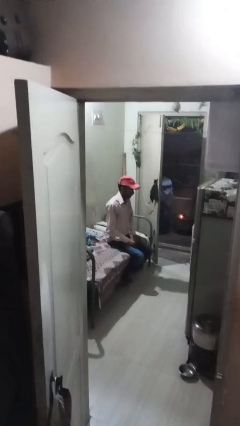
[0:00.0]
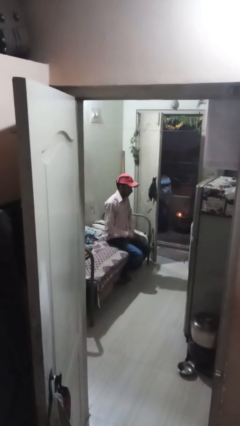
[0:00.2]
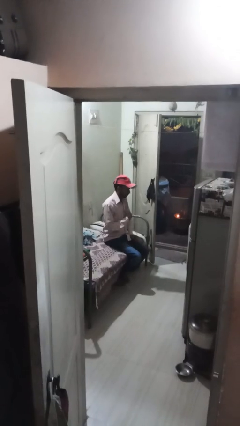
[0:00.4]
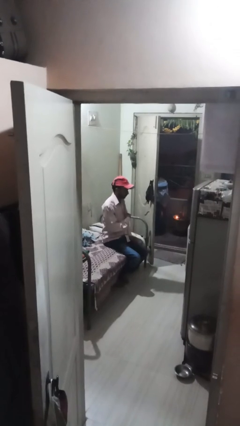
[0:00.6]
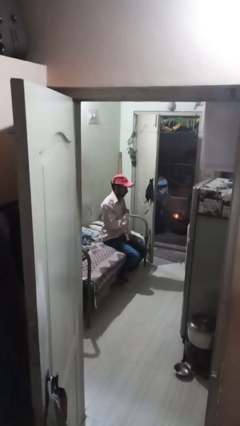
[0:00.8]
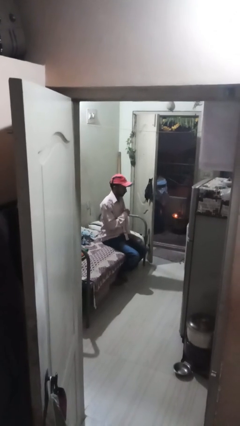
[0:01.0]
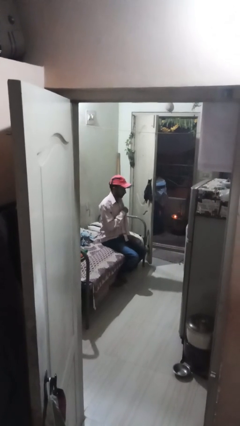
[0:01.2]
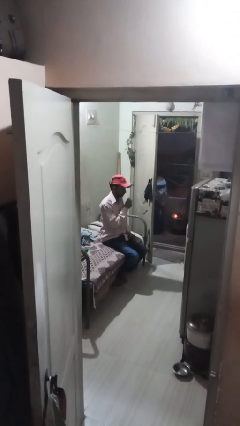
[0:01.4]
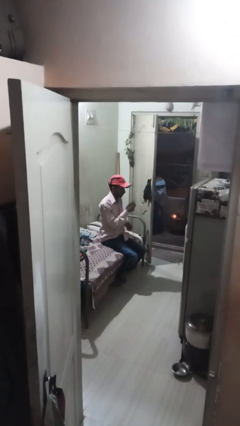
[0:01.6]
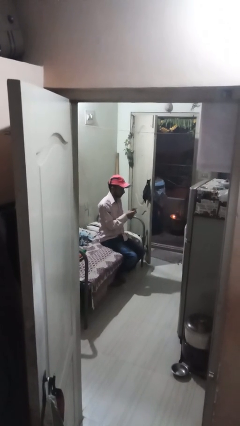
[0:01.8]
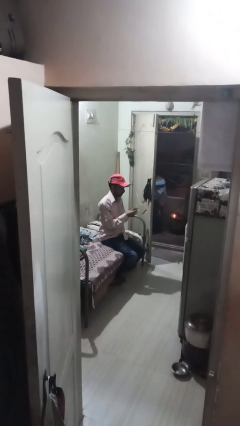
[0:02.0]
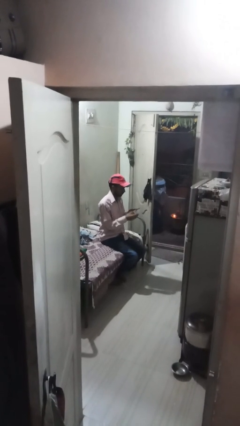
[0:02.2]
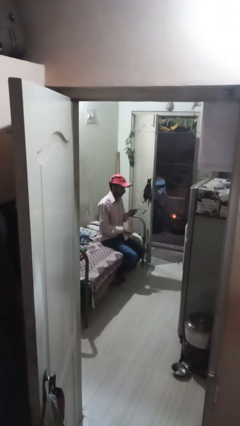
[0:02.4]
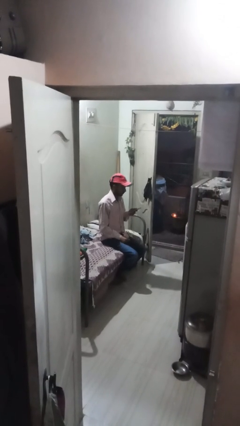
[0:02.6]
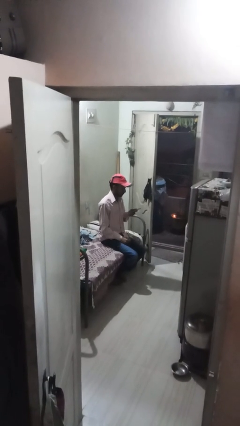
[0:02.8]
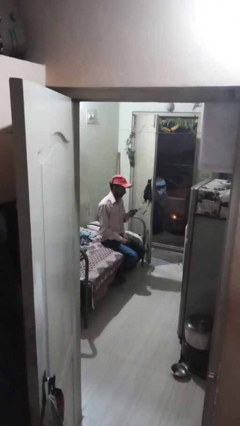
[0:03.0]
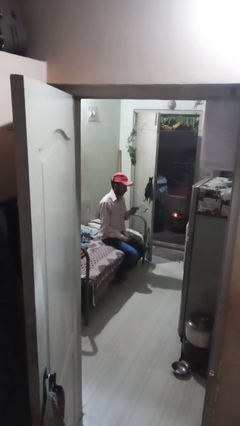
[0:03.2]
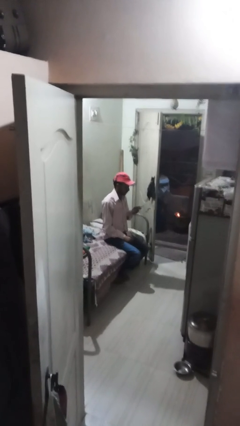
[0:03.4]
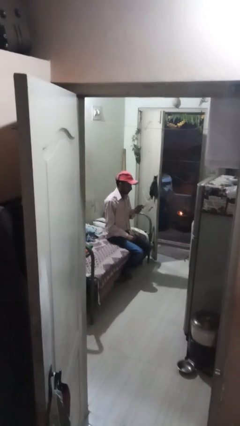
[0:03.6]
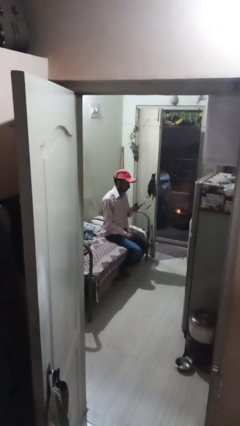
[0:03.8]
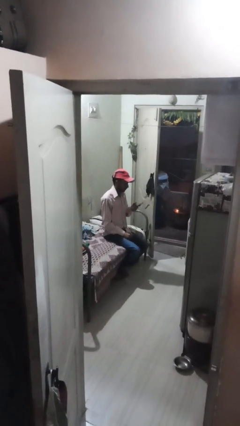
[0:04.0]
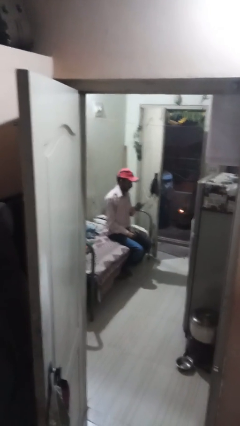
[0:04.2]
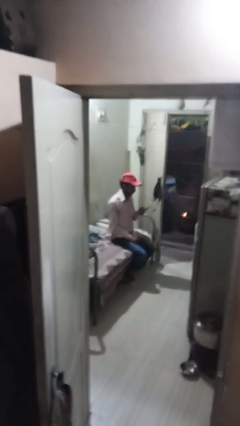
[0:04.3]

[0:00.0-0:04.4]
person takes phone from pocket

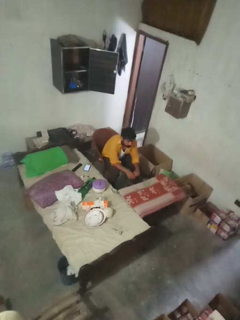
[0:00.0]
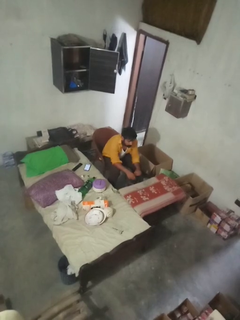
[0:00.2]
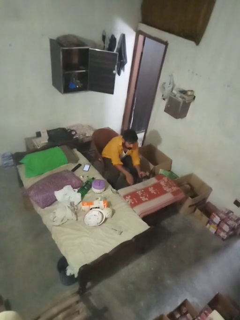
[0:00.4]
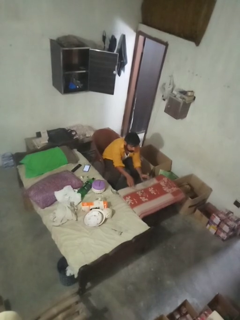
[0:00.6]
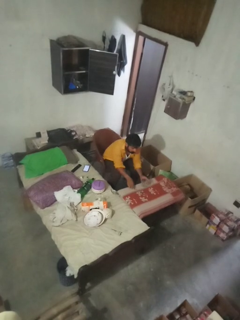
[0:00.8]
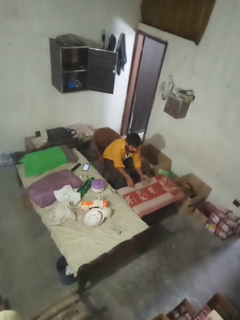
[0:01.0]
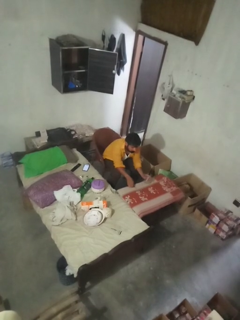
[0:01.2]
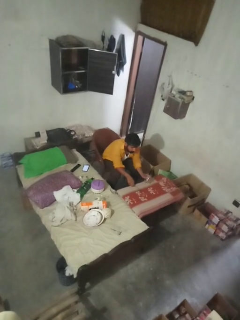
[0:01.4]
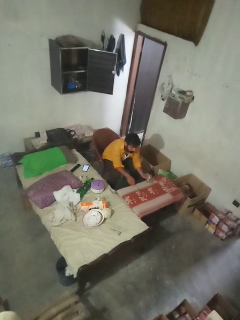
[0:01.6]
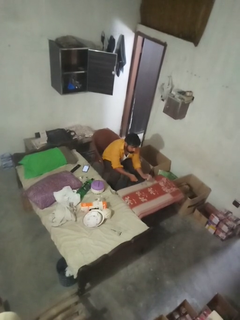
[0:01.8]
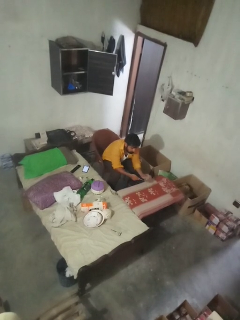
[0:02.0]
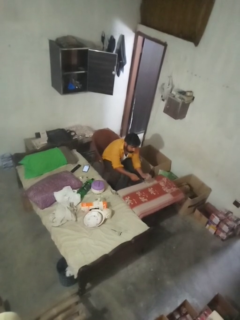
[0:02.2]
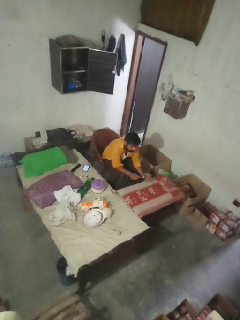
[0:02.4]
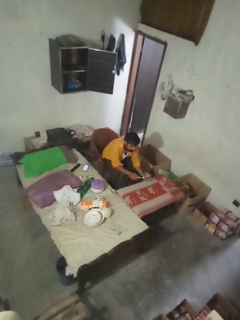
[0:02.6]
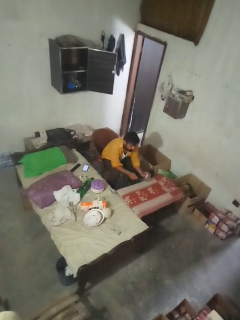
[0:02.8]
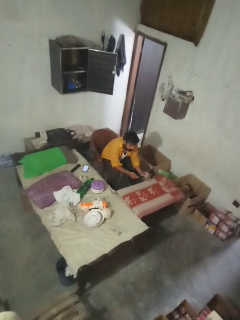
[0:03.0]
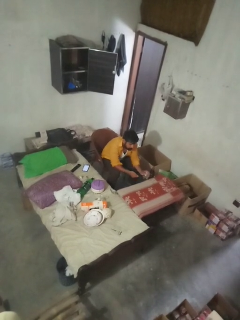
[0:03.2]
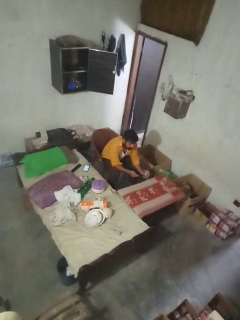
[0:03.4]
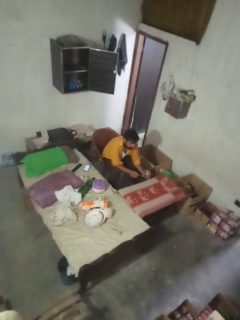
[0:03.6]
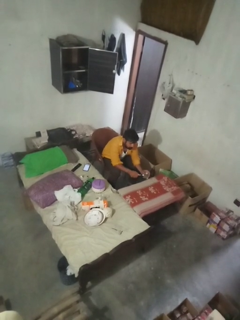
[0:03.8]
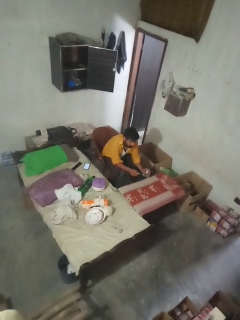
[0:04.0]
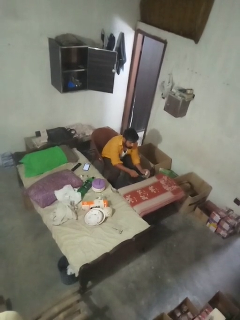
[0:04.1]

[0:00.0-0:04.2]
person knocks over glass

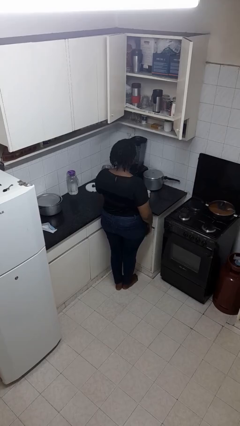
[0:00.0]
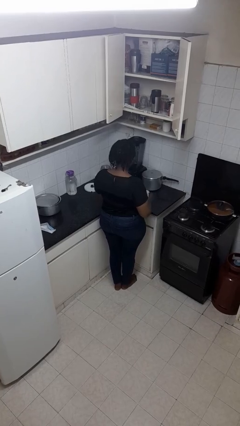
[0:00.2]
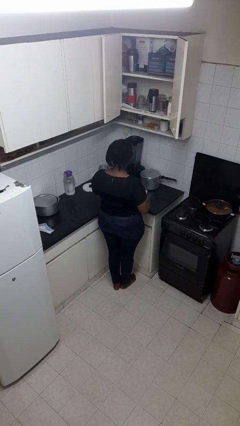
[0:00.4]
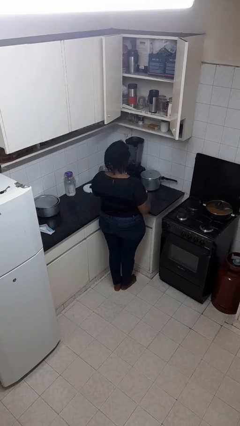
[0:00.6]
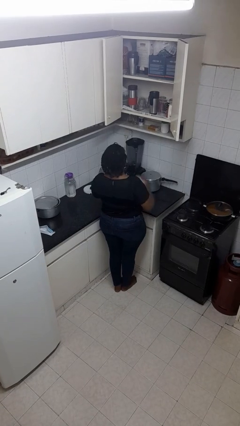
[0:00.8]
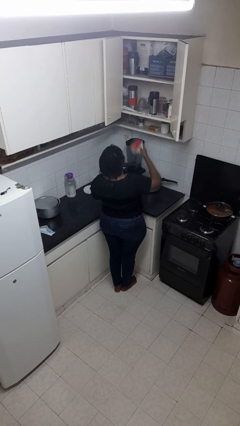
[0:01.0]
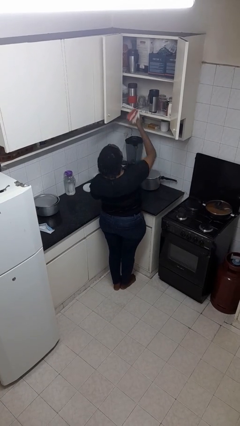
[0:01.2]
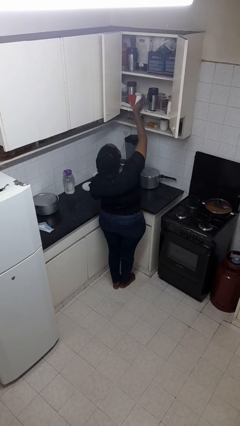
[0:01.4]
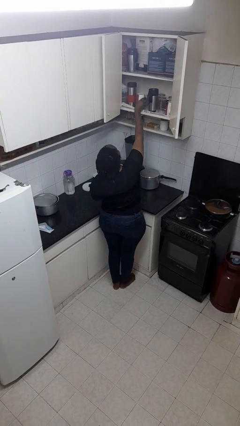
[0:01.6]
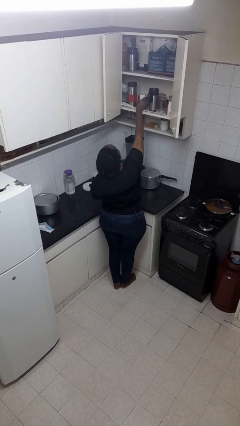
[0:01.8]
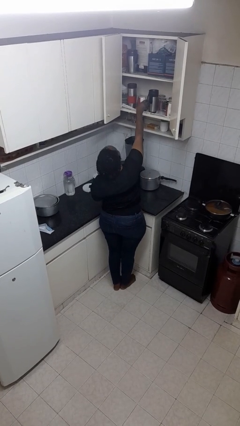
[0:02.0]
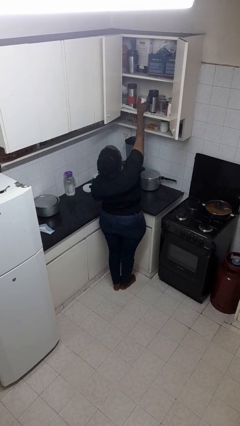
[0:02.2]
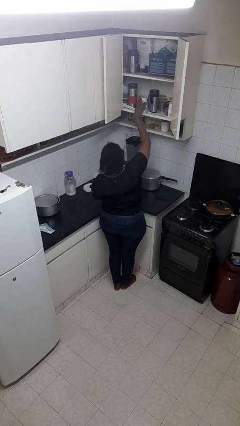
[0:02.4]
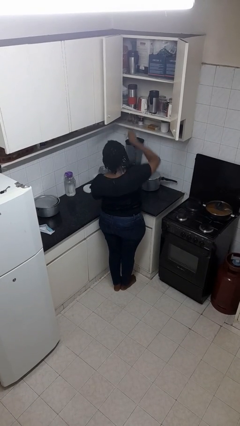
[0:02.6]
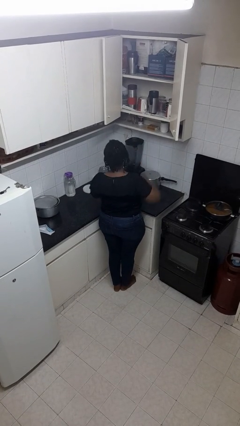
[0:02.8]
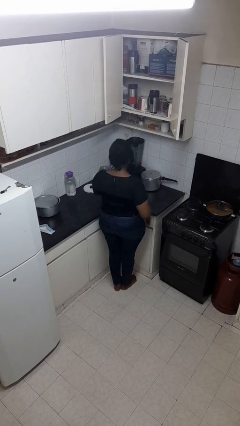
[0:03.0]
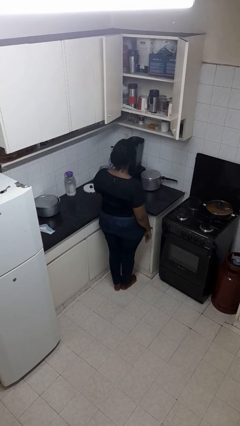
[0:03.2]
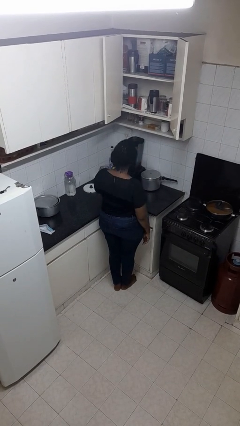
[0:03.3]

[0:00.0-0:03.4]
person puts object in cabinet

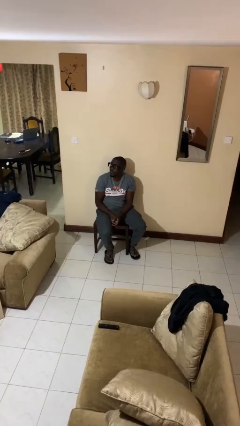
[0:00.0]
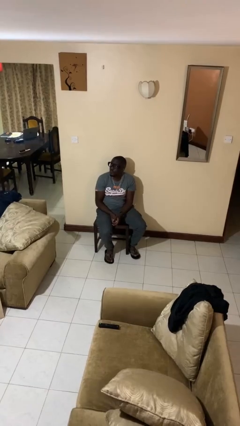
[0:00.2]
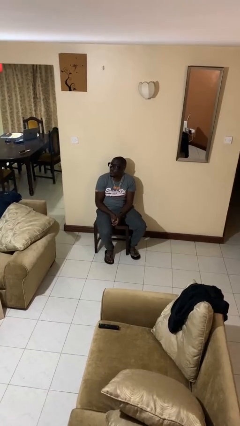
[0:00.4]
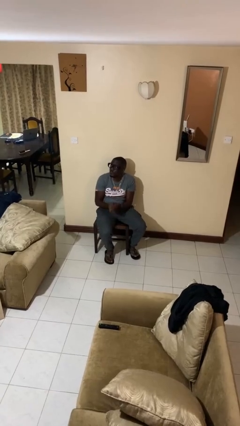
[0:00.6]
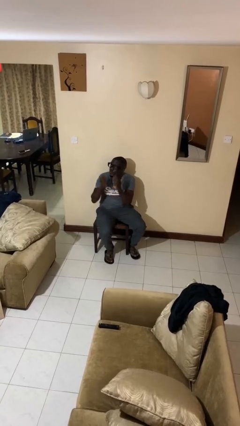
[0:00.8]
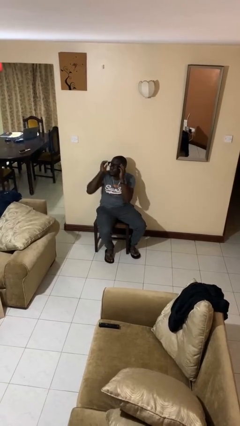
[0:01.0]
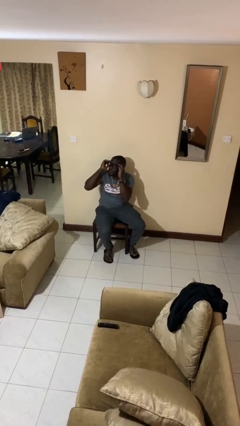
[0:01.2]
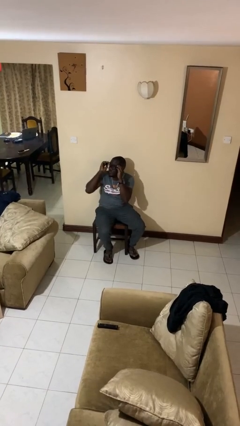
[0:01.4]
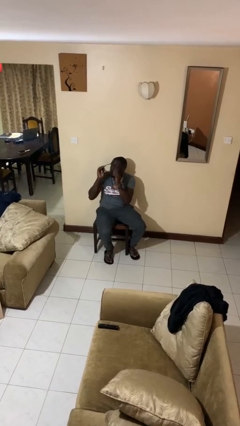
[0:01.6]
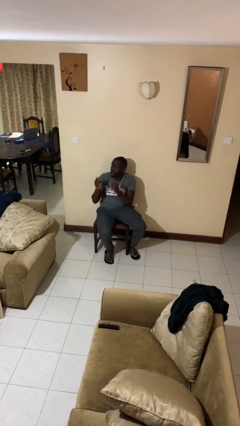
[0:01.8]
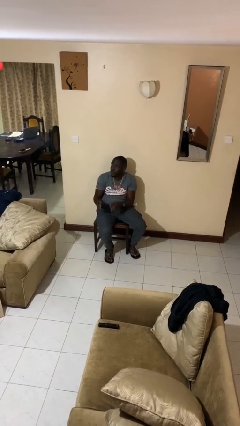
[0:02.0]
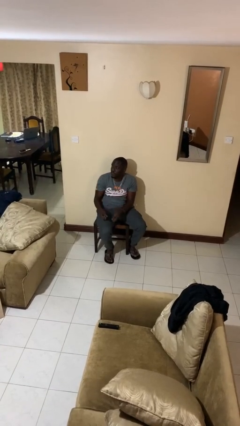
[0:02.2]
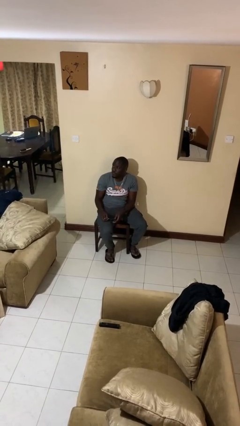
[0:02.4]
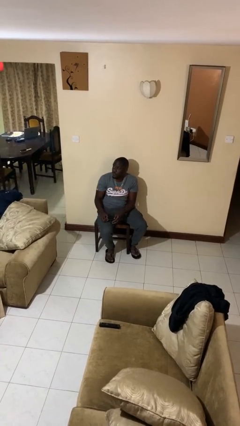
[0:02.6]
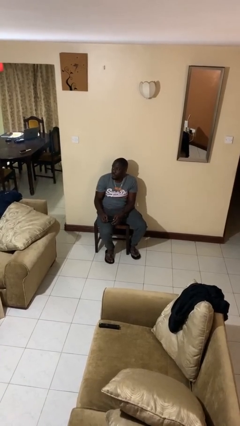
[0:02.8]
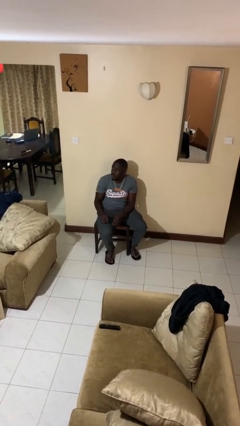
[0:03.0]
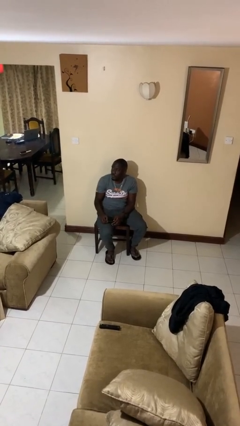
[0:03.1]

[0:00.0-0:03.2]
person takes off glasses

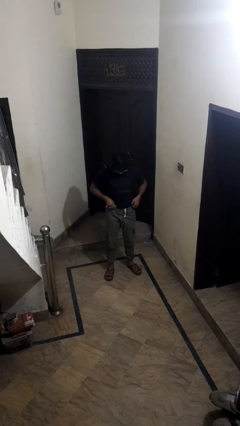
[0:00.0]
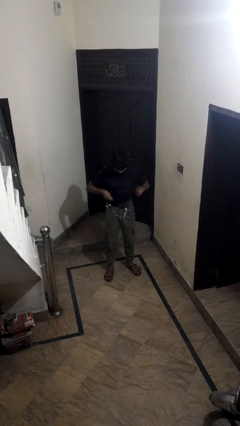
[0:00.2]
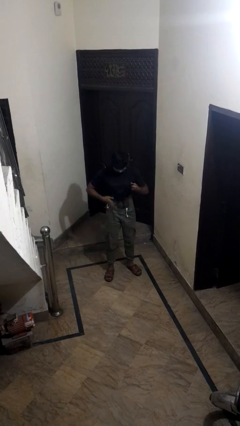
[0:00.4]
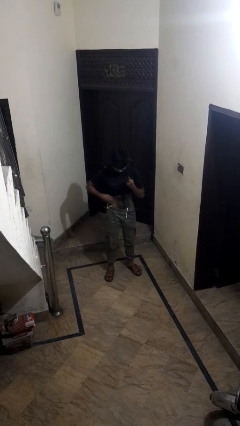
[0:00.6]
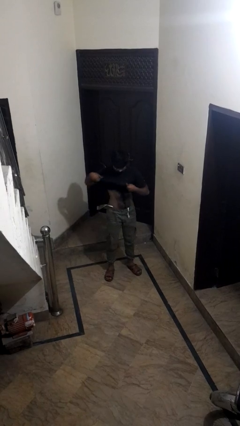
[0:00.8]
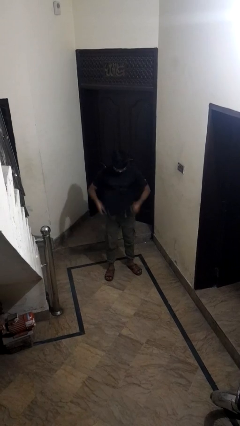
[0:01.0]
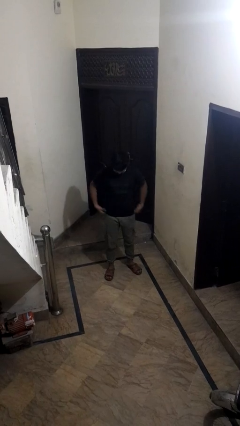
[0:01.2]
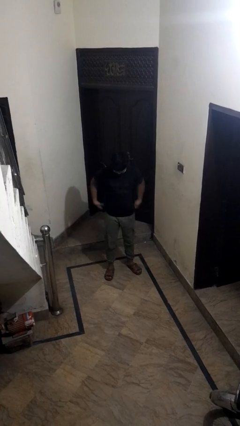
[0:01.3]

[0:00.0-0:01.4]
person untucks shirt

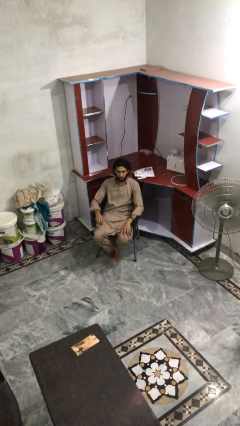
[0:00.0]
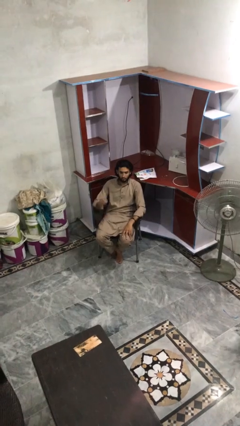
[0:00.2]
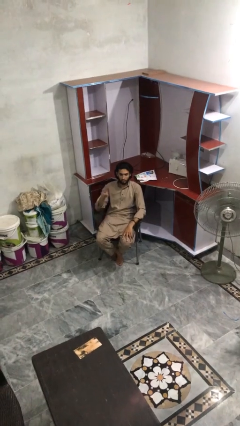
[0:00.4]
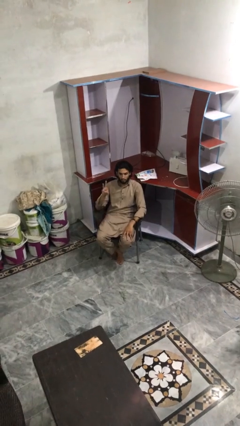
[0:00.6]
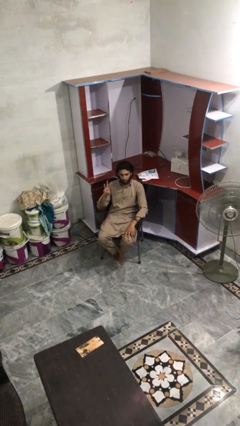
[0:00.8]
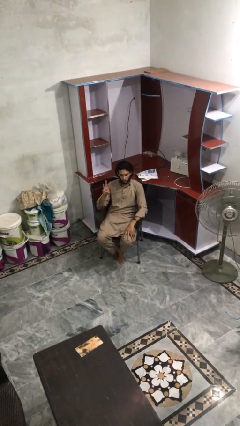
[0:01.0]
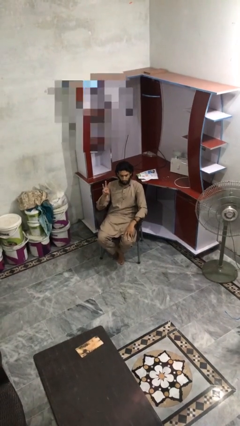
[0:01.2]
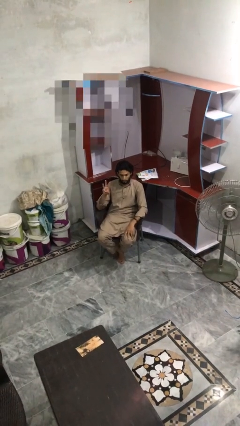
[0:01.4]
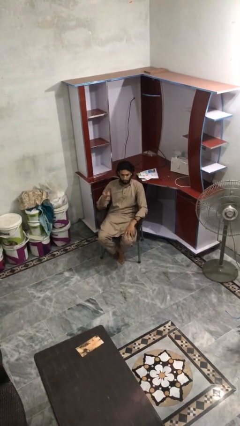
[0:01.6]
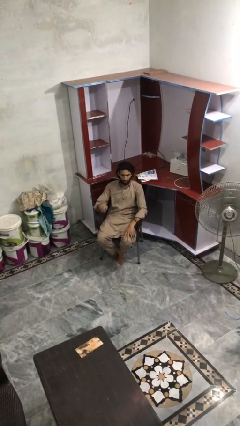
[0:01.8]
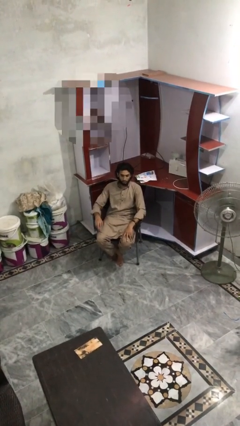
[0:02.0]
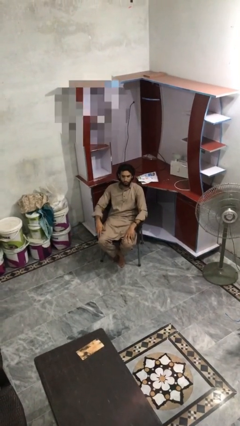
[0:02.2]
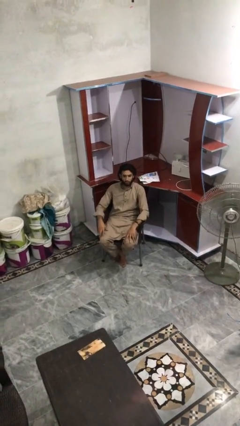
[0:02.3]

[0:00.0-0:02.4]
person gestures number three
